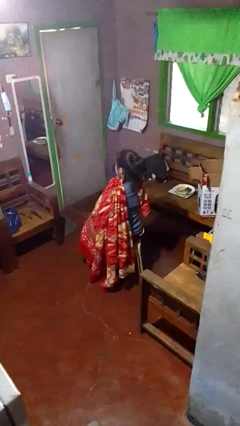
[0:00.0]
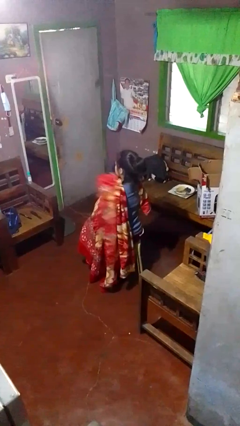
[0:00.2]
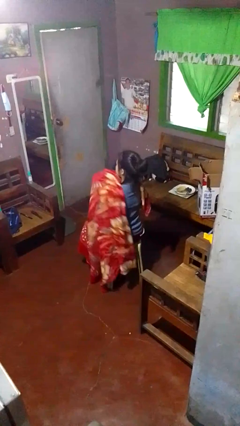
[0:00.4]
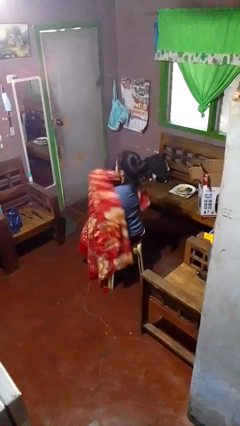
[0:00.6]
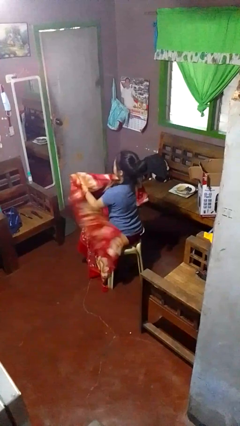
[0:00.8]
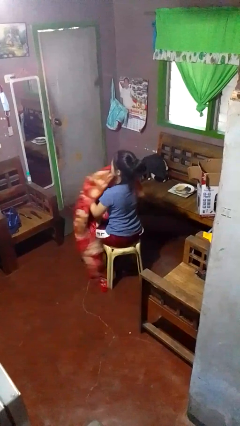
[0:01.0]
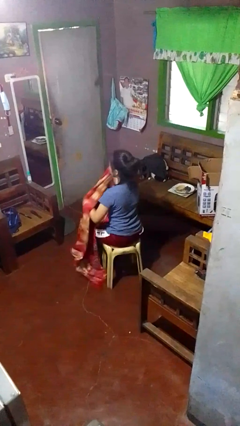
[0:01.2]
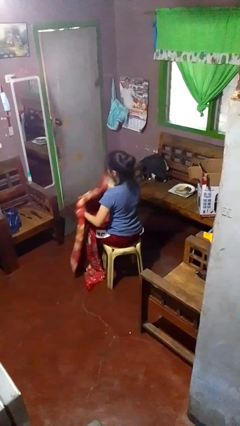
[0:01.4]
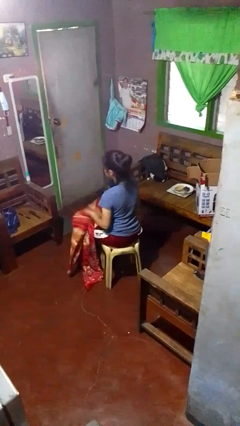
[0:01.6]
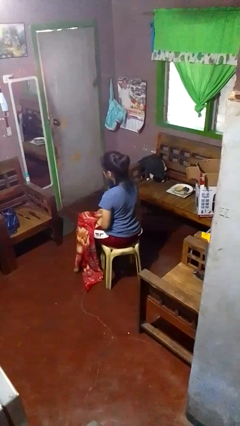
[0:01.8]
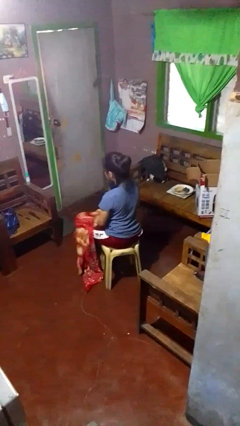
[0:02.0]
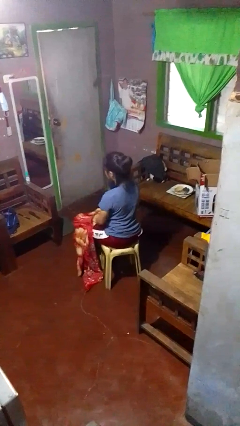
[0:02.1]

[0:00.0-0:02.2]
person uncovers with blanket

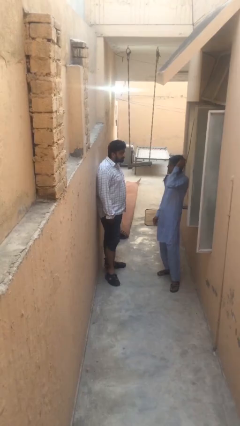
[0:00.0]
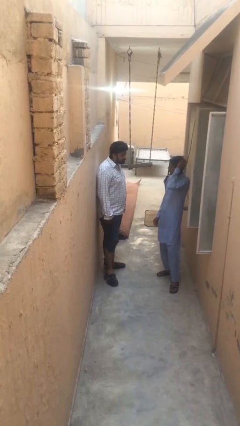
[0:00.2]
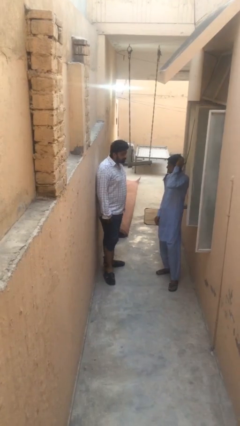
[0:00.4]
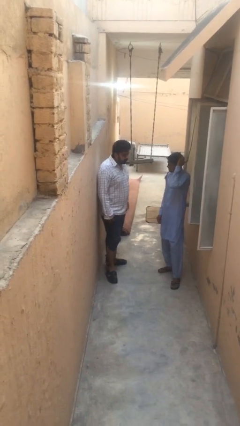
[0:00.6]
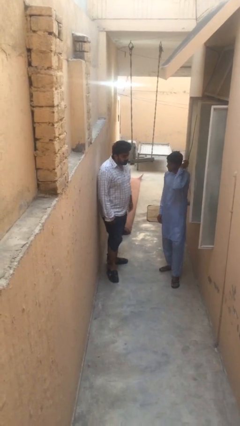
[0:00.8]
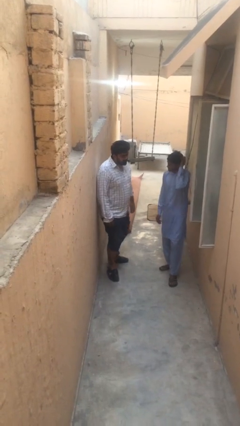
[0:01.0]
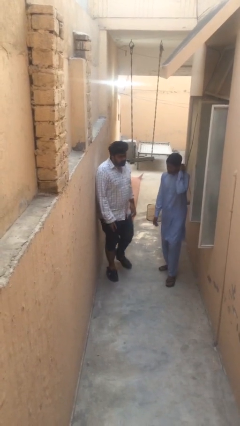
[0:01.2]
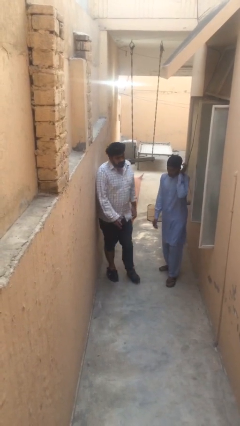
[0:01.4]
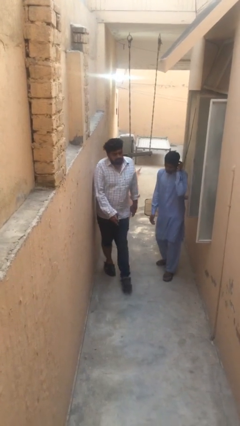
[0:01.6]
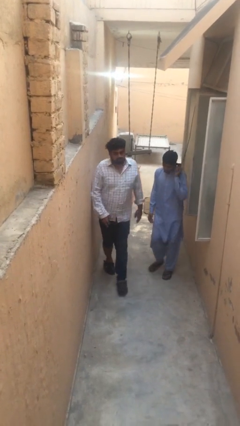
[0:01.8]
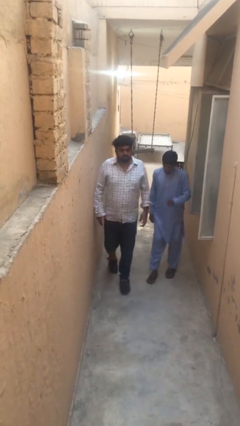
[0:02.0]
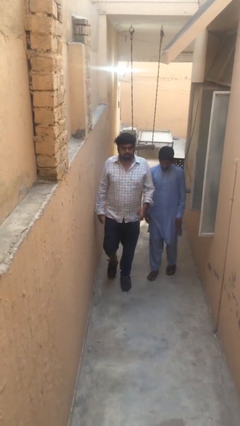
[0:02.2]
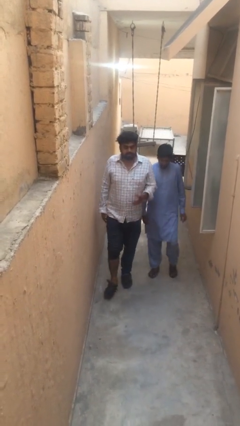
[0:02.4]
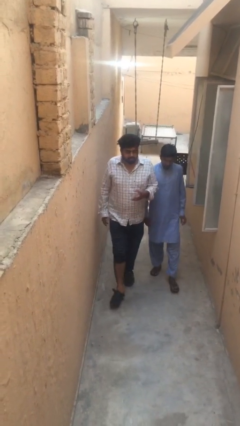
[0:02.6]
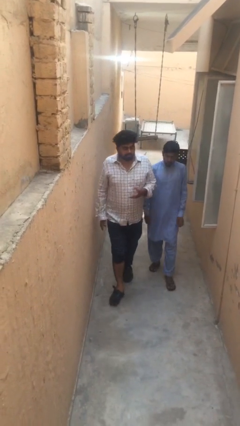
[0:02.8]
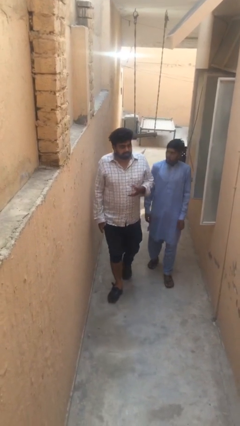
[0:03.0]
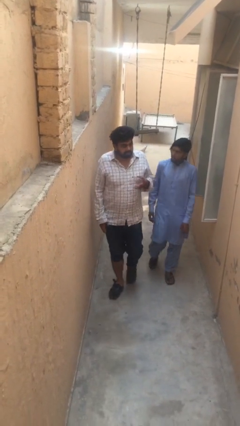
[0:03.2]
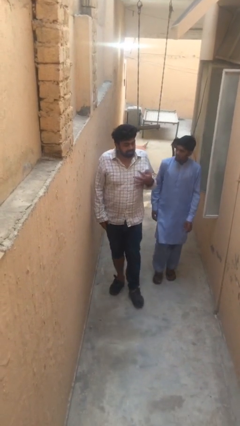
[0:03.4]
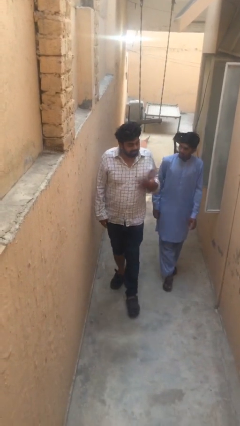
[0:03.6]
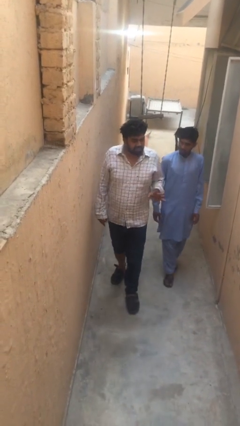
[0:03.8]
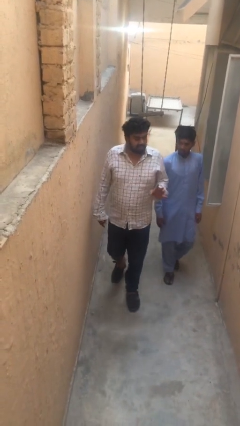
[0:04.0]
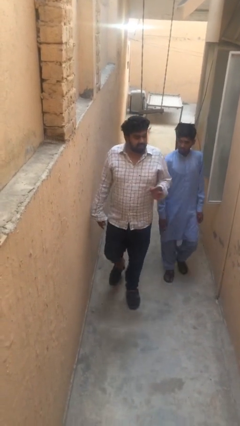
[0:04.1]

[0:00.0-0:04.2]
person talks to person

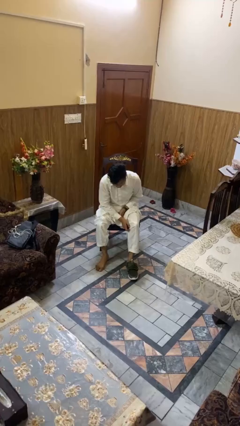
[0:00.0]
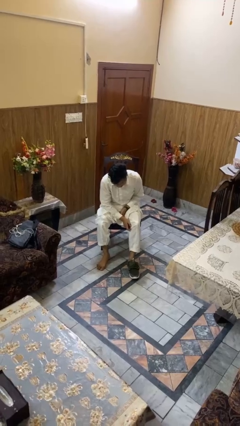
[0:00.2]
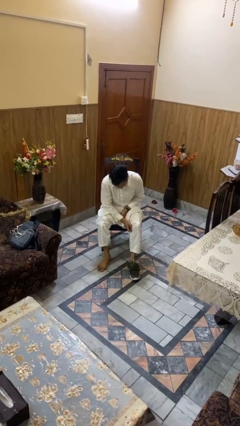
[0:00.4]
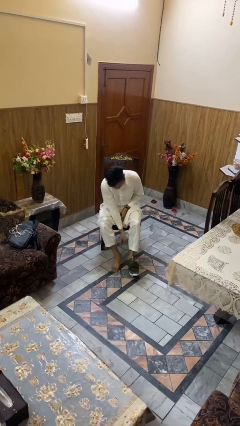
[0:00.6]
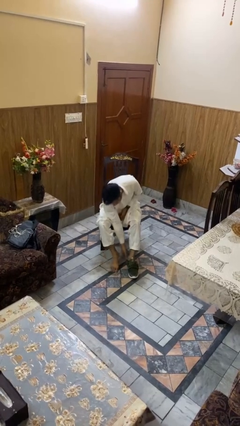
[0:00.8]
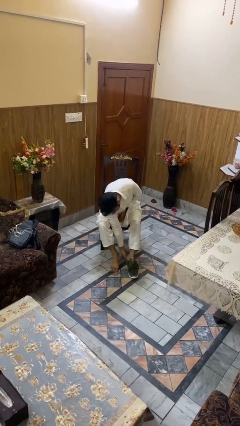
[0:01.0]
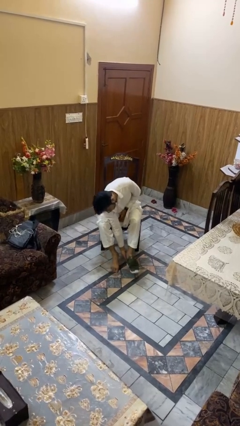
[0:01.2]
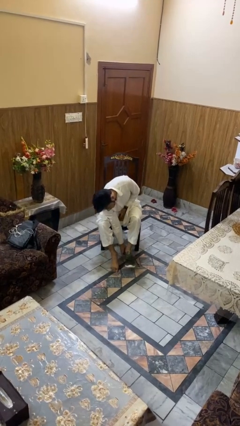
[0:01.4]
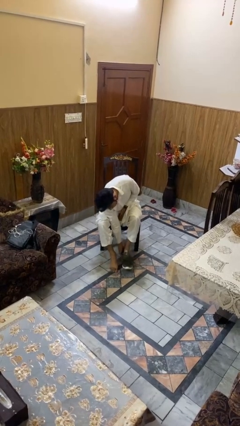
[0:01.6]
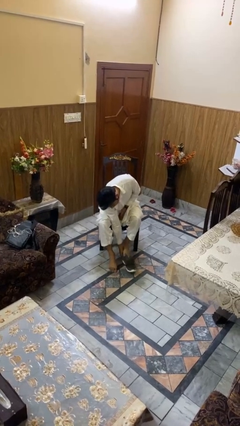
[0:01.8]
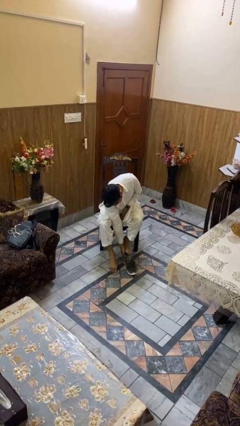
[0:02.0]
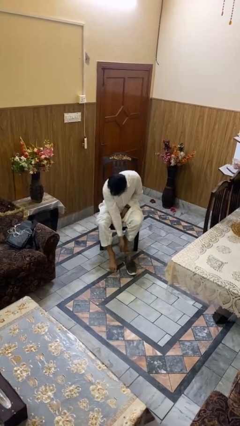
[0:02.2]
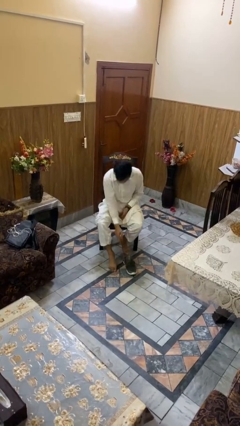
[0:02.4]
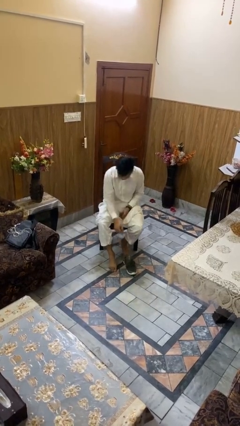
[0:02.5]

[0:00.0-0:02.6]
person takes off shoes

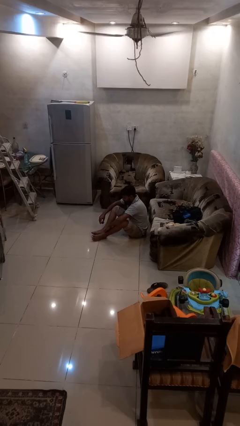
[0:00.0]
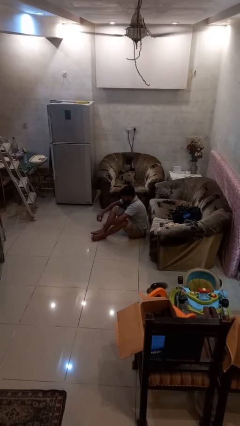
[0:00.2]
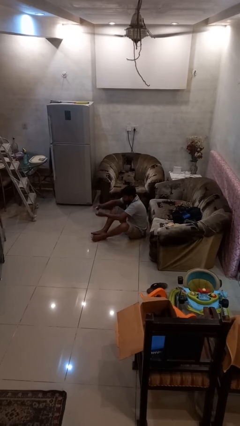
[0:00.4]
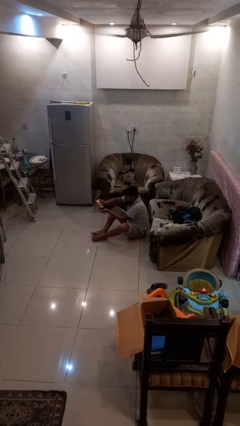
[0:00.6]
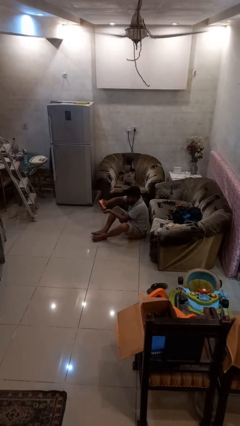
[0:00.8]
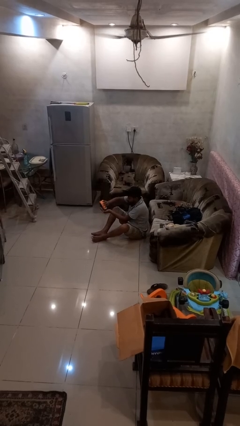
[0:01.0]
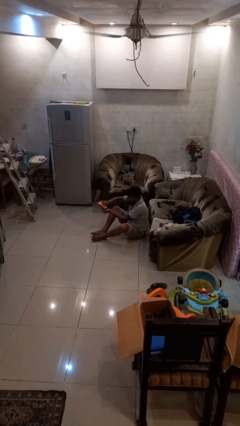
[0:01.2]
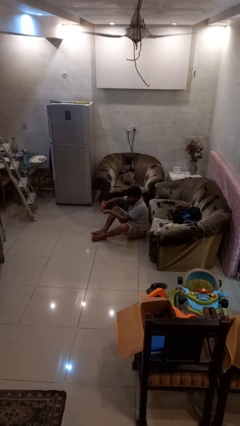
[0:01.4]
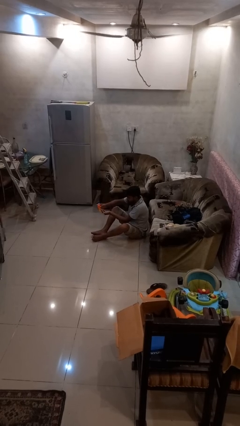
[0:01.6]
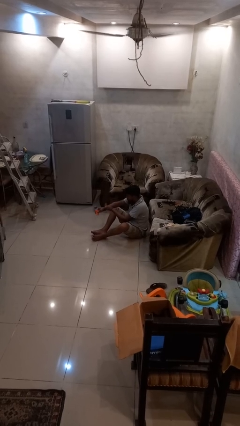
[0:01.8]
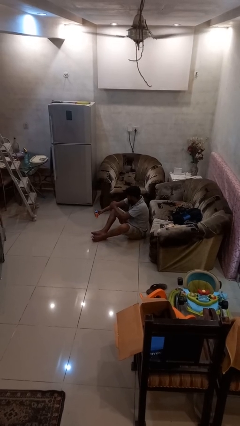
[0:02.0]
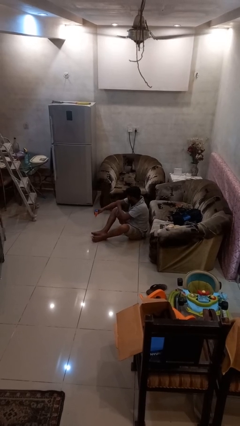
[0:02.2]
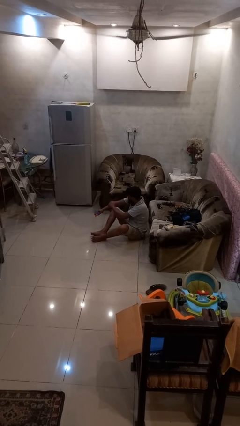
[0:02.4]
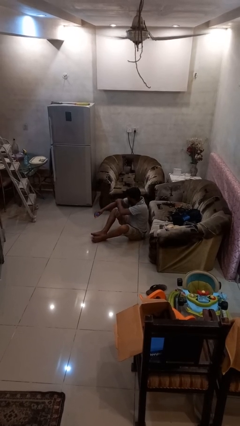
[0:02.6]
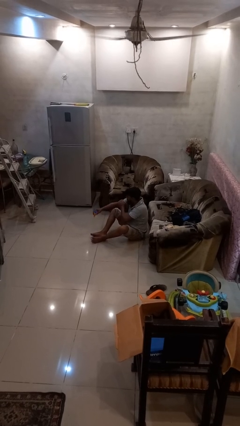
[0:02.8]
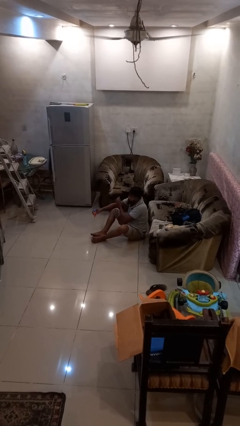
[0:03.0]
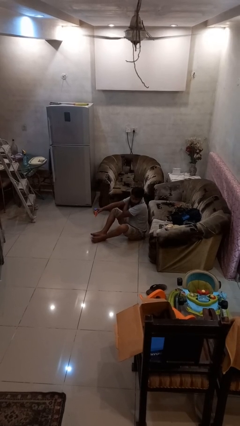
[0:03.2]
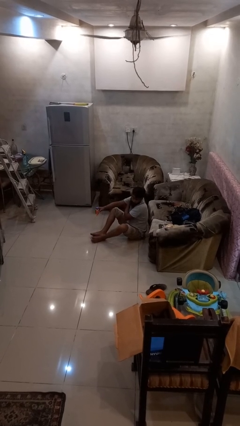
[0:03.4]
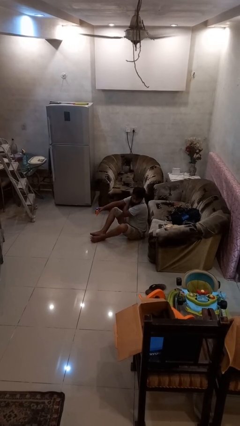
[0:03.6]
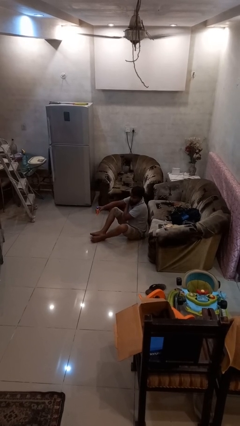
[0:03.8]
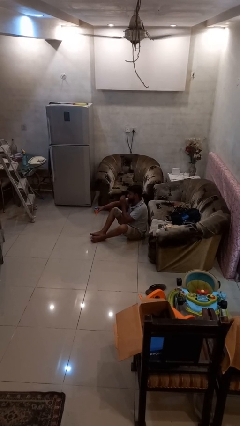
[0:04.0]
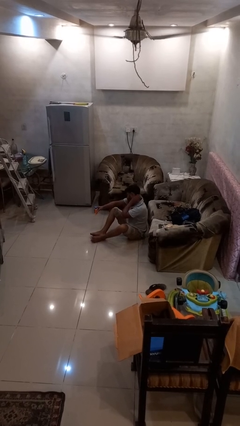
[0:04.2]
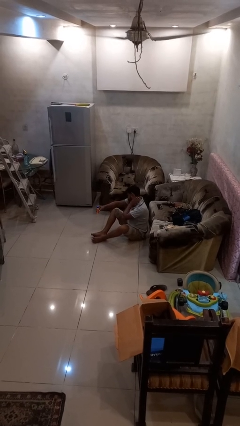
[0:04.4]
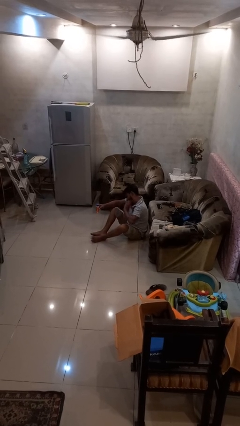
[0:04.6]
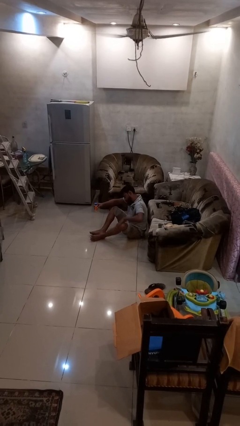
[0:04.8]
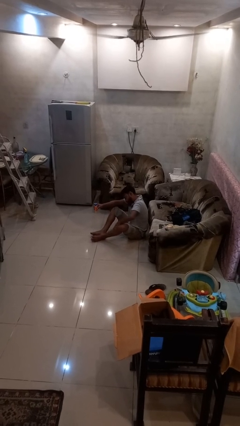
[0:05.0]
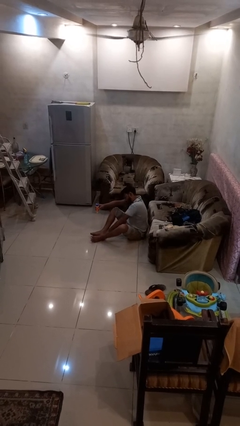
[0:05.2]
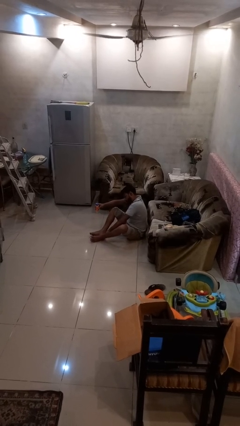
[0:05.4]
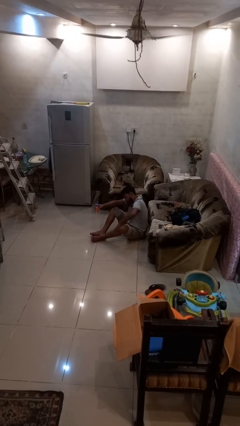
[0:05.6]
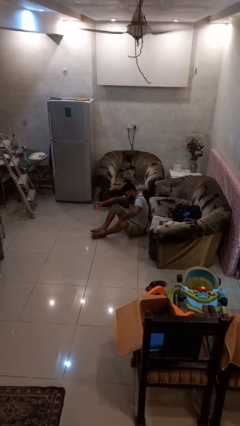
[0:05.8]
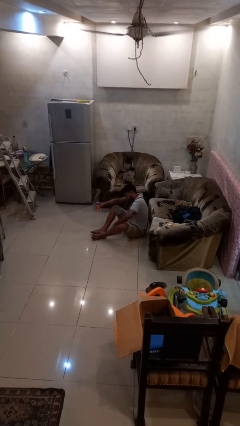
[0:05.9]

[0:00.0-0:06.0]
person applies sunscreen

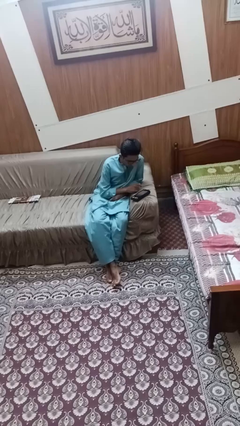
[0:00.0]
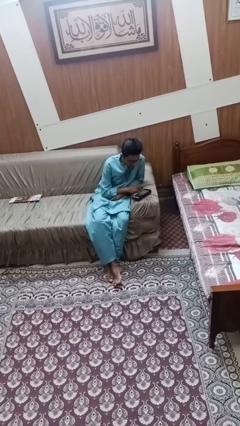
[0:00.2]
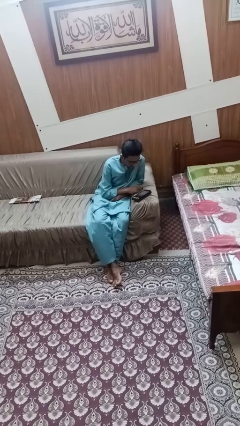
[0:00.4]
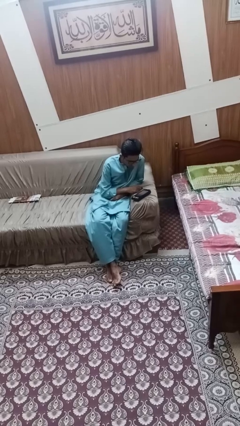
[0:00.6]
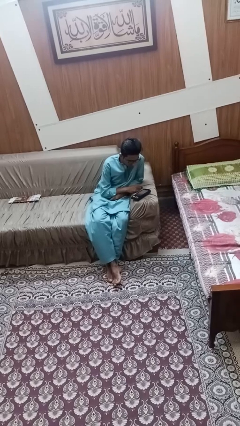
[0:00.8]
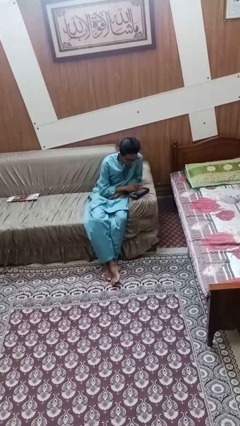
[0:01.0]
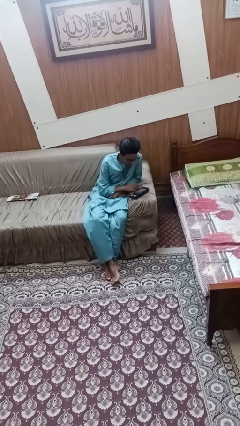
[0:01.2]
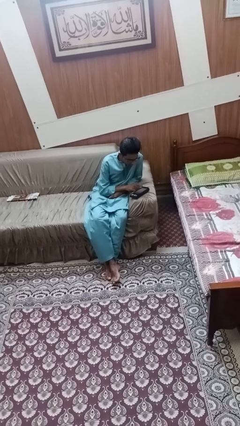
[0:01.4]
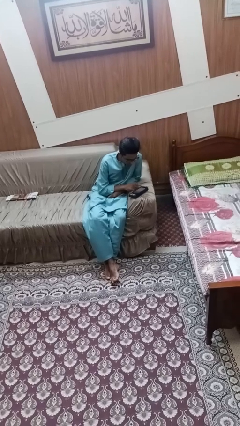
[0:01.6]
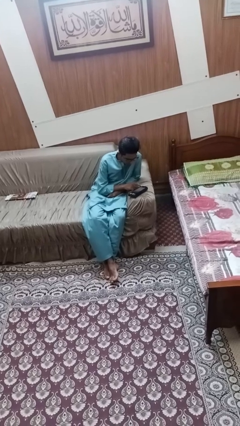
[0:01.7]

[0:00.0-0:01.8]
person interacts with tablet

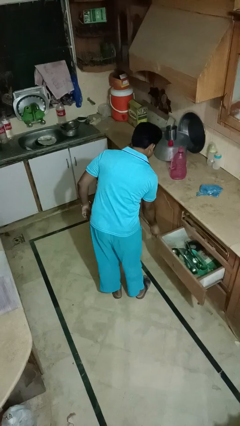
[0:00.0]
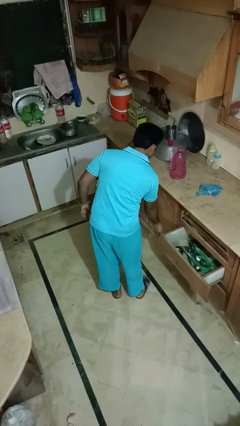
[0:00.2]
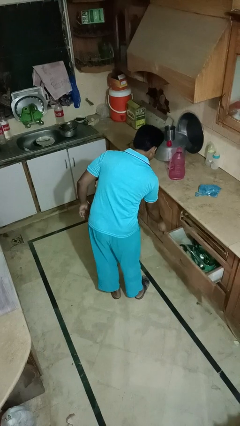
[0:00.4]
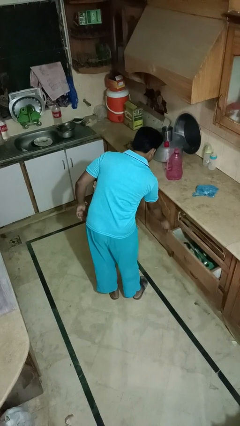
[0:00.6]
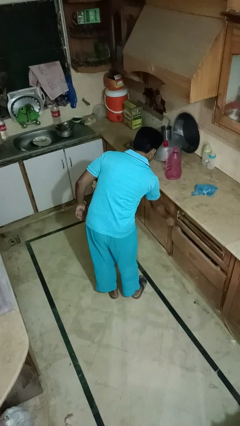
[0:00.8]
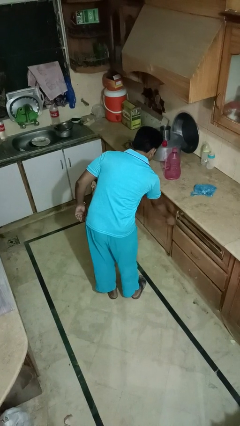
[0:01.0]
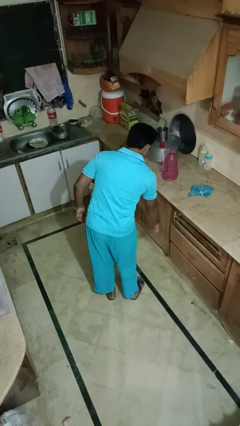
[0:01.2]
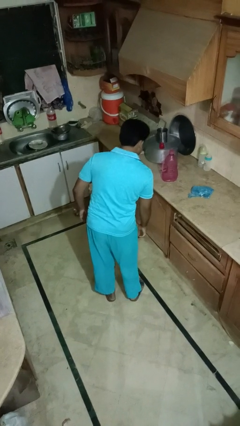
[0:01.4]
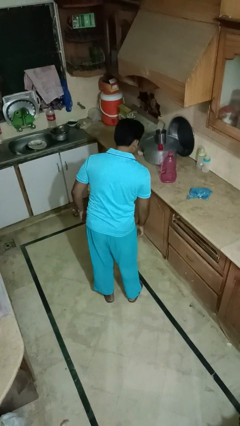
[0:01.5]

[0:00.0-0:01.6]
person closes kitchen drawer
